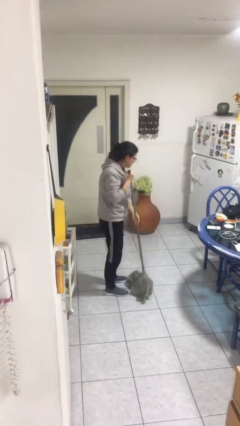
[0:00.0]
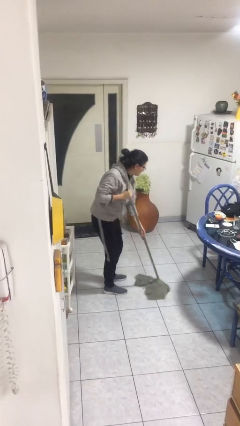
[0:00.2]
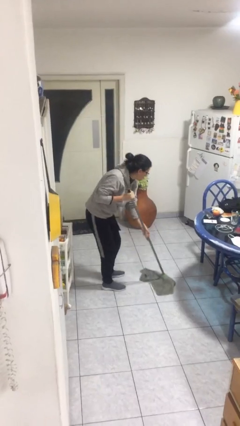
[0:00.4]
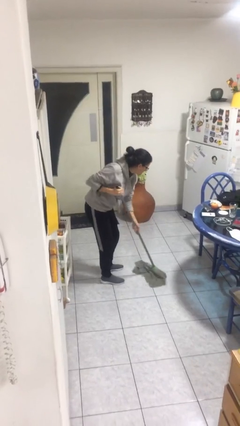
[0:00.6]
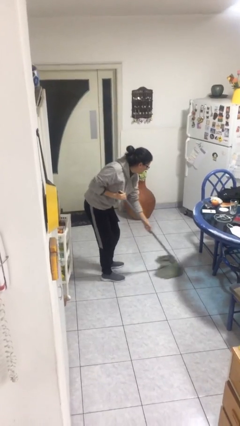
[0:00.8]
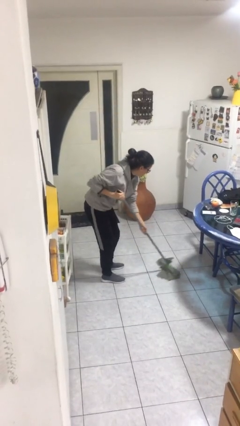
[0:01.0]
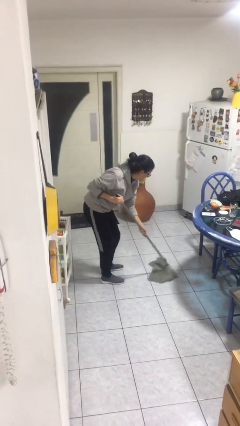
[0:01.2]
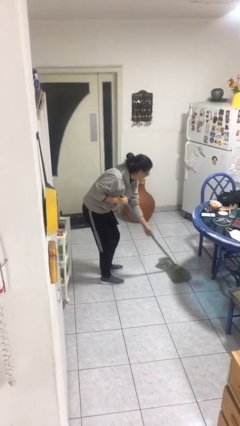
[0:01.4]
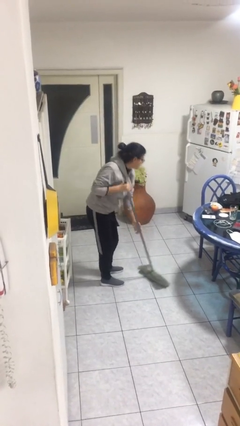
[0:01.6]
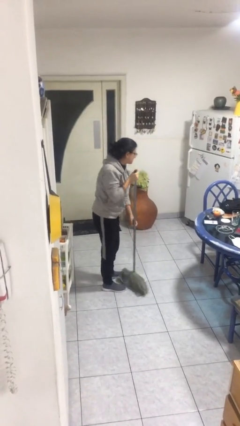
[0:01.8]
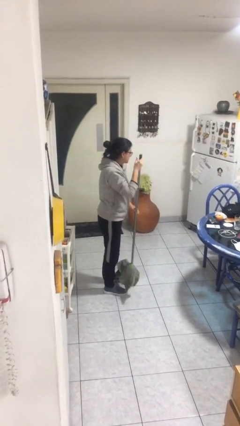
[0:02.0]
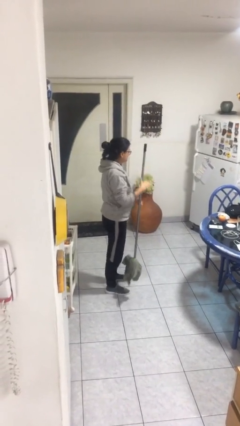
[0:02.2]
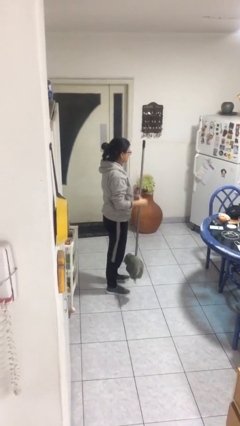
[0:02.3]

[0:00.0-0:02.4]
person sweeps floor

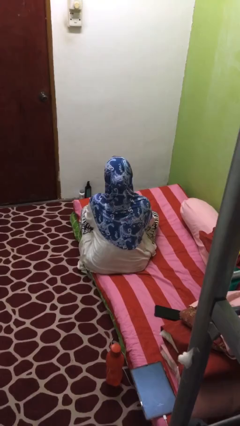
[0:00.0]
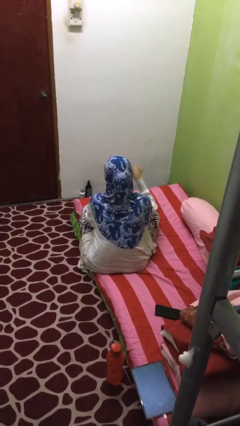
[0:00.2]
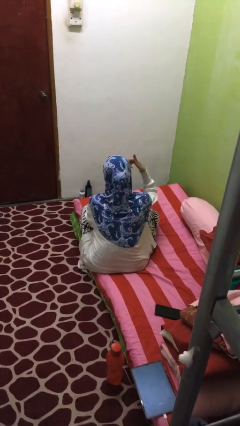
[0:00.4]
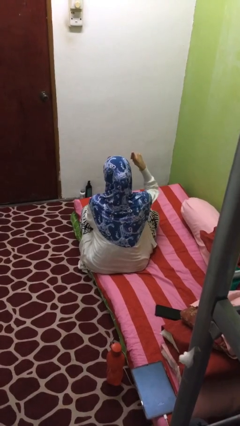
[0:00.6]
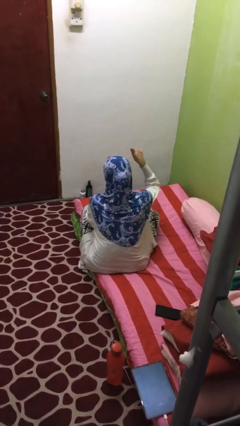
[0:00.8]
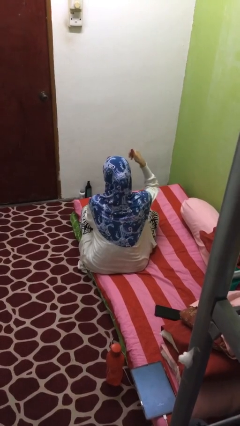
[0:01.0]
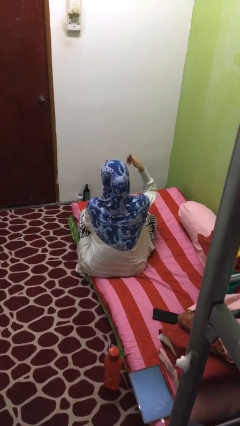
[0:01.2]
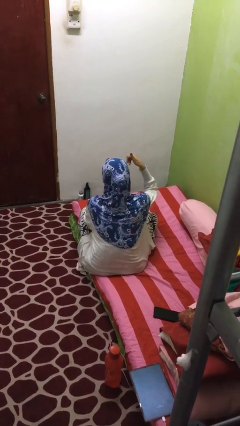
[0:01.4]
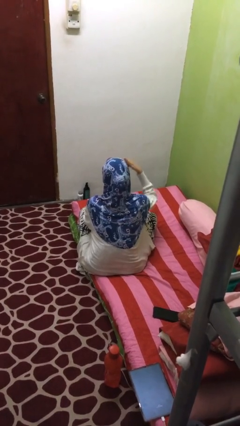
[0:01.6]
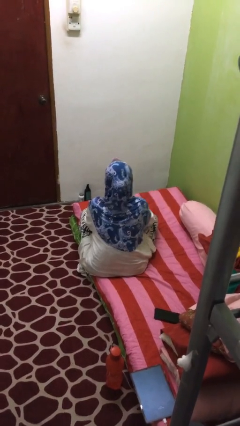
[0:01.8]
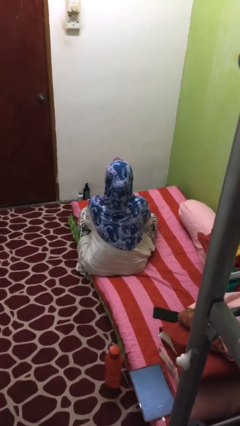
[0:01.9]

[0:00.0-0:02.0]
person gestures hang loose

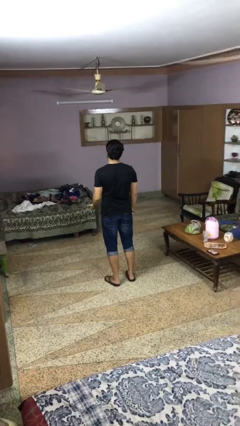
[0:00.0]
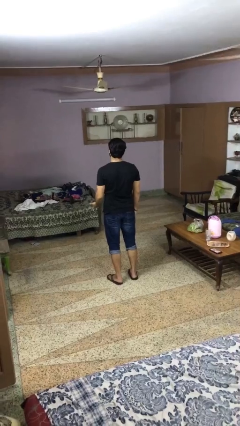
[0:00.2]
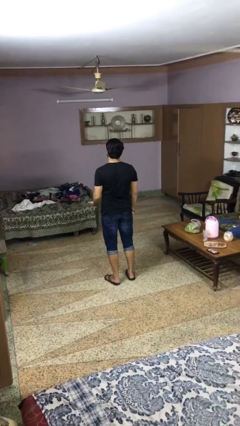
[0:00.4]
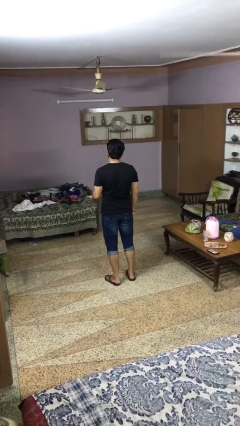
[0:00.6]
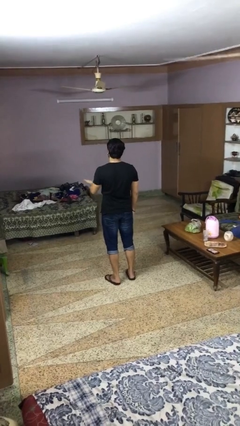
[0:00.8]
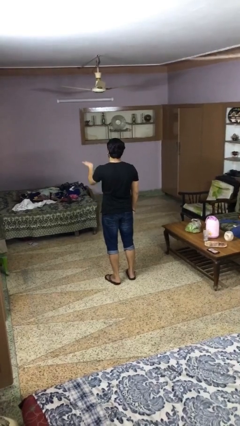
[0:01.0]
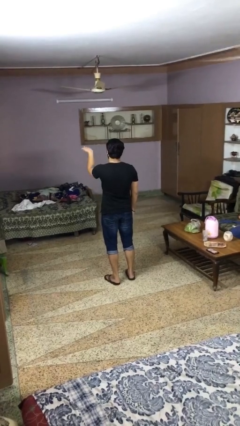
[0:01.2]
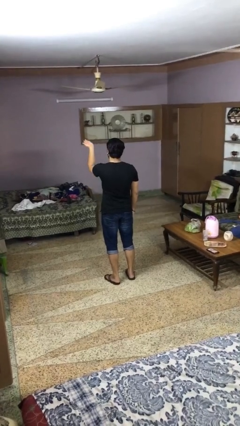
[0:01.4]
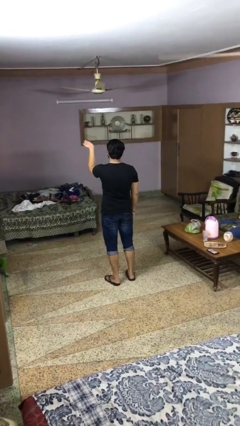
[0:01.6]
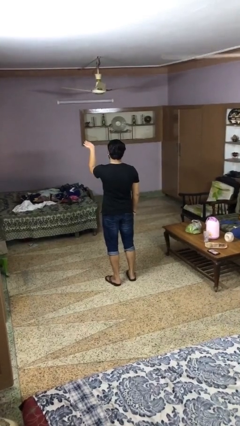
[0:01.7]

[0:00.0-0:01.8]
person gestures swipe up

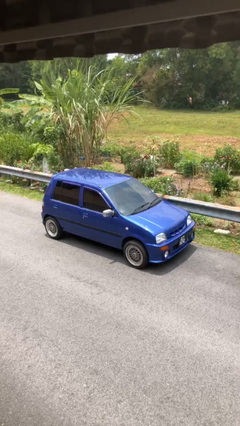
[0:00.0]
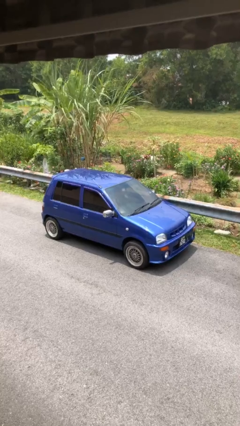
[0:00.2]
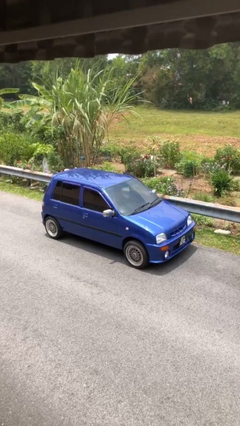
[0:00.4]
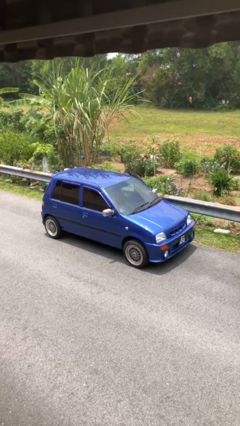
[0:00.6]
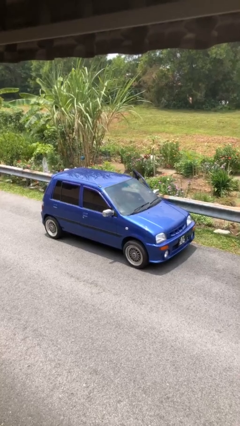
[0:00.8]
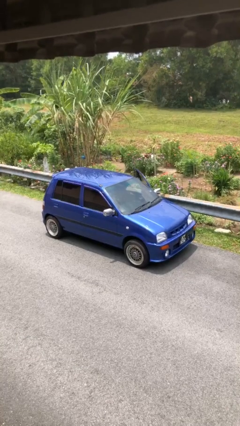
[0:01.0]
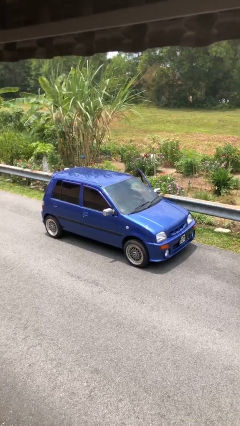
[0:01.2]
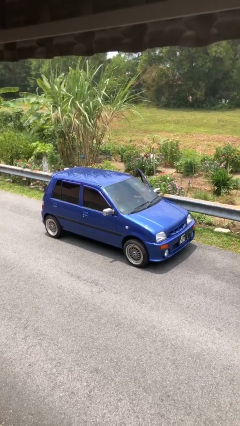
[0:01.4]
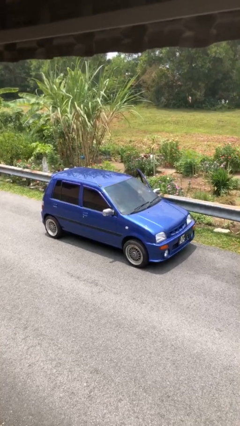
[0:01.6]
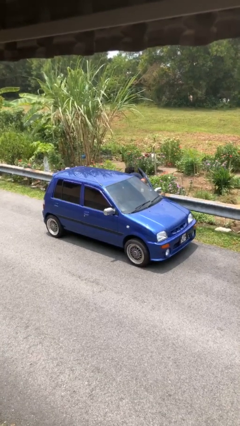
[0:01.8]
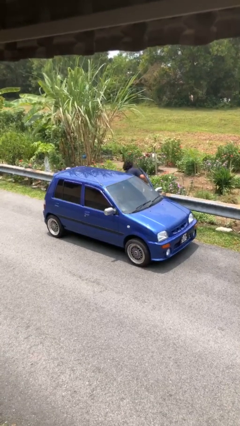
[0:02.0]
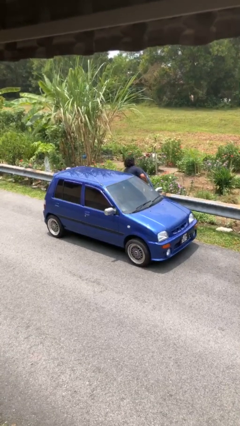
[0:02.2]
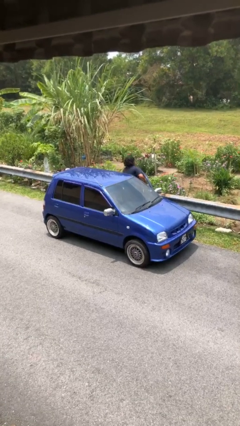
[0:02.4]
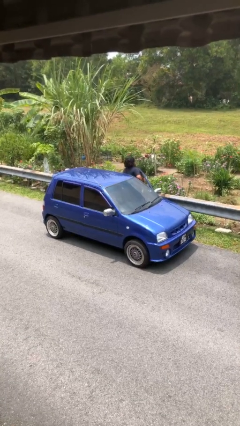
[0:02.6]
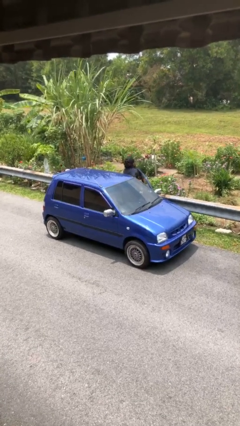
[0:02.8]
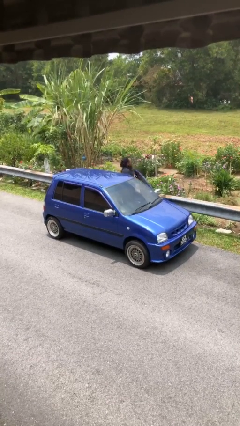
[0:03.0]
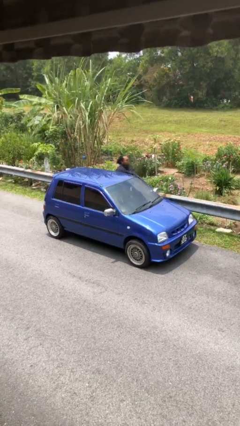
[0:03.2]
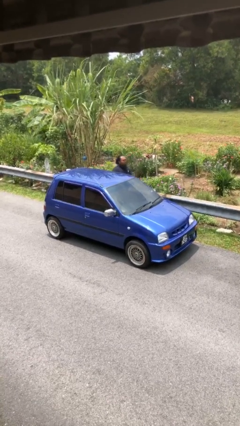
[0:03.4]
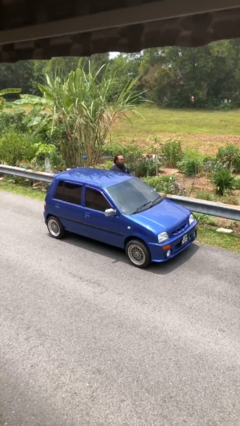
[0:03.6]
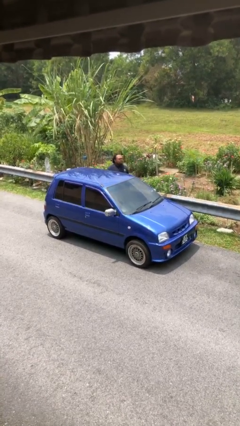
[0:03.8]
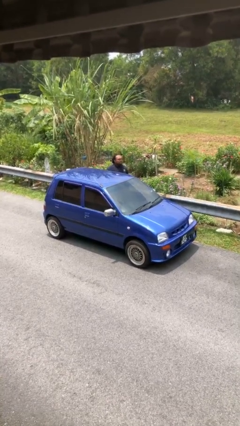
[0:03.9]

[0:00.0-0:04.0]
car drops off person

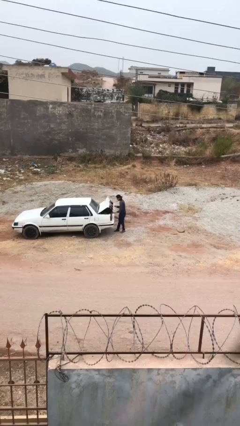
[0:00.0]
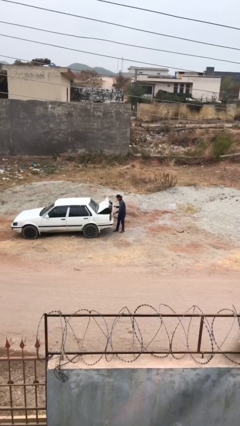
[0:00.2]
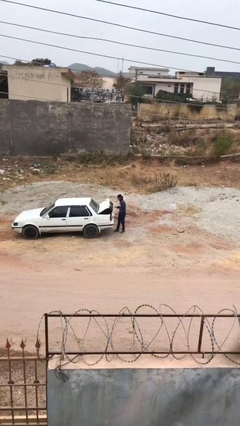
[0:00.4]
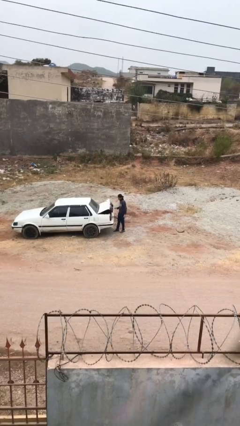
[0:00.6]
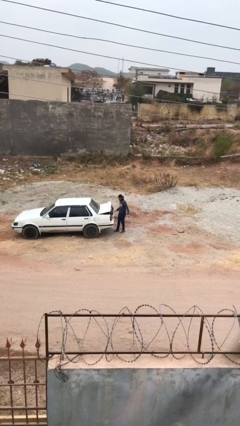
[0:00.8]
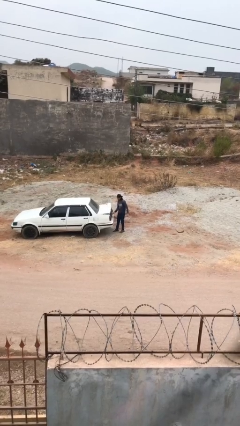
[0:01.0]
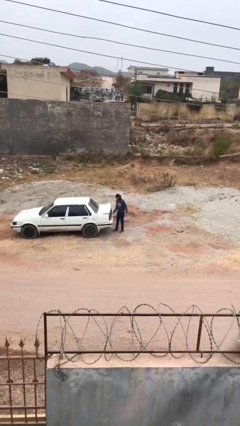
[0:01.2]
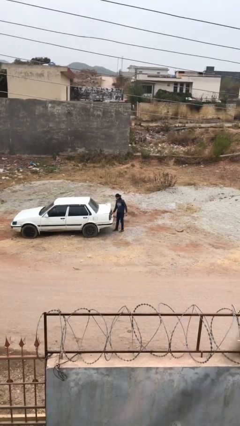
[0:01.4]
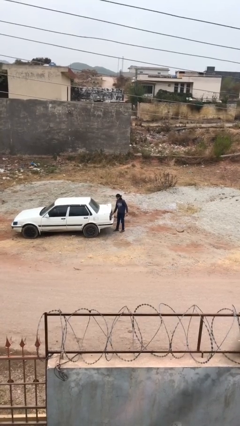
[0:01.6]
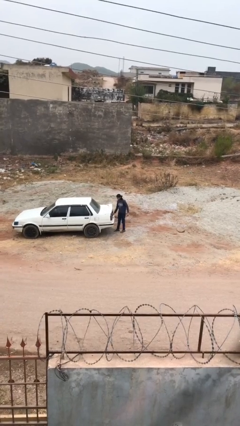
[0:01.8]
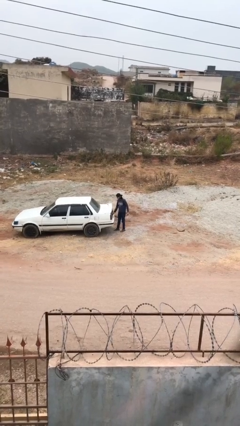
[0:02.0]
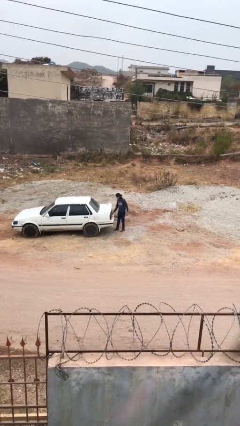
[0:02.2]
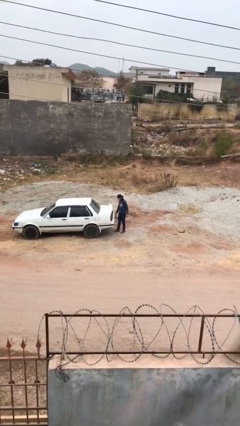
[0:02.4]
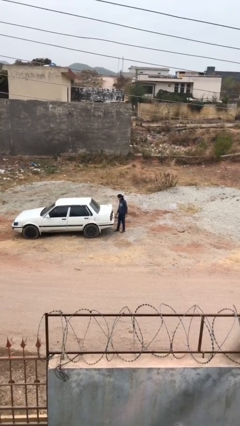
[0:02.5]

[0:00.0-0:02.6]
person closes car trunk

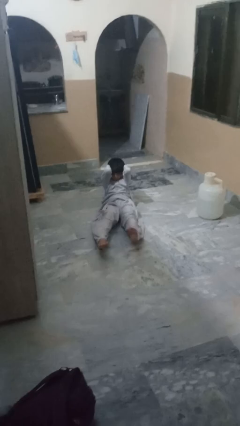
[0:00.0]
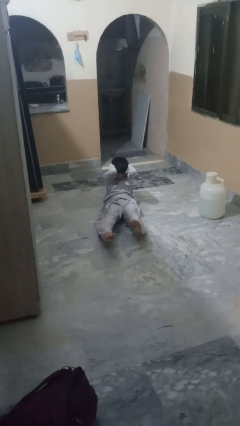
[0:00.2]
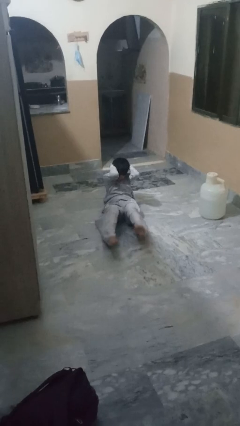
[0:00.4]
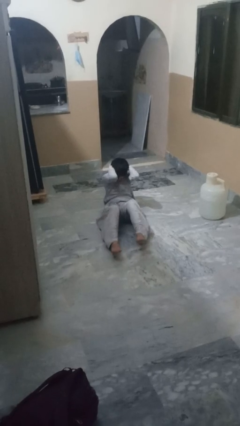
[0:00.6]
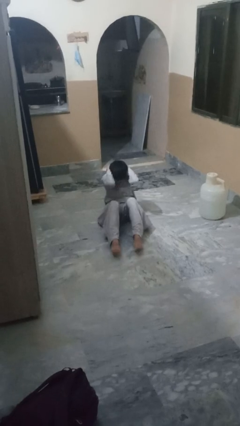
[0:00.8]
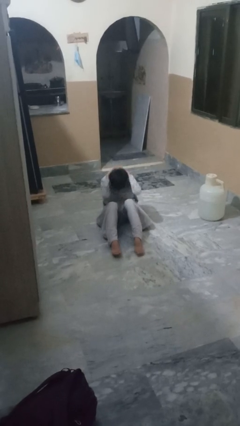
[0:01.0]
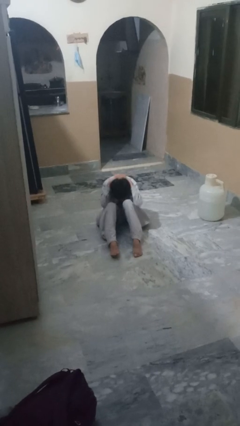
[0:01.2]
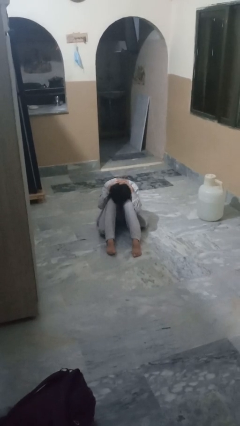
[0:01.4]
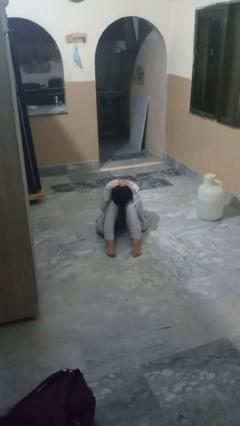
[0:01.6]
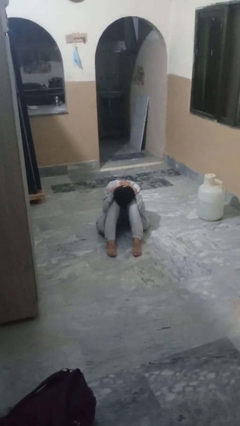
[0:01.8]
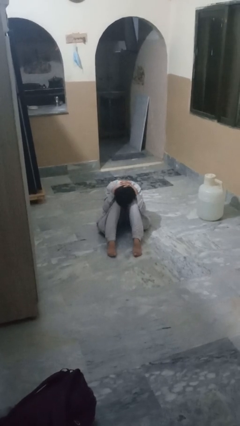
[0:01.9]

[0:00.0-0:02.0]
person exercises with situp

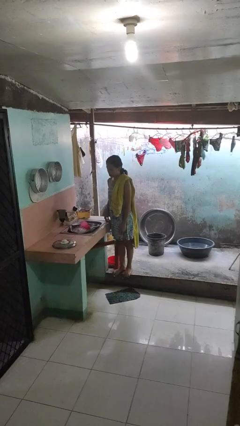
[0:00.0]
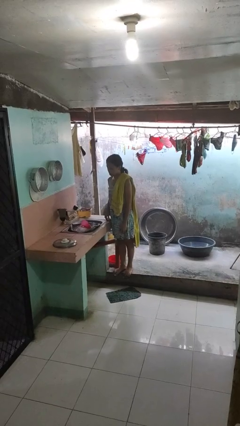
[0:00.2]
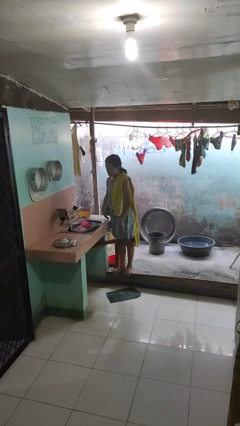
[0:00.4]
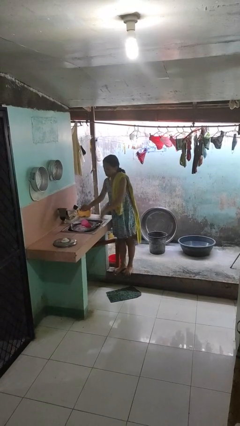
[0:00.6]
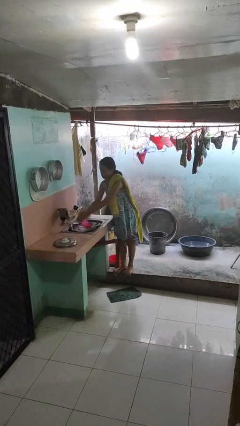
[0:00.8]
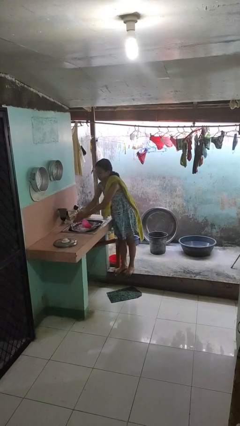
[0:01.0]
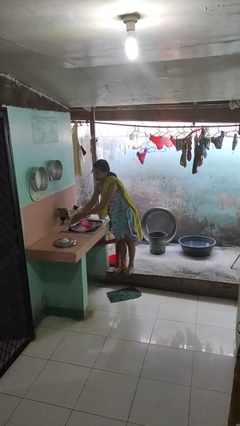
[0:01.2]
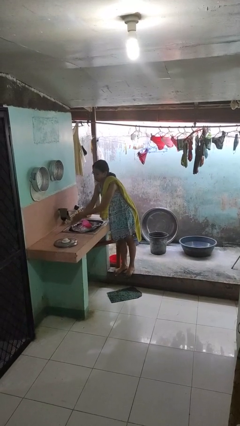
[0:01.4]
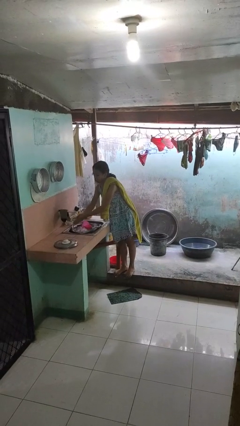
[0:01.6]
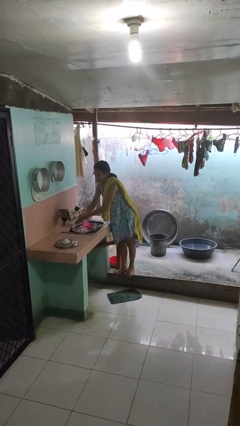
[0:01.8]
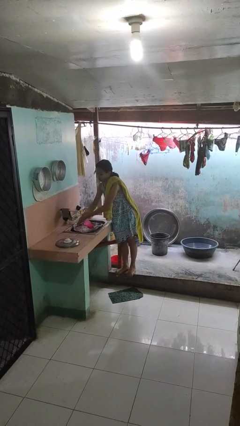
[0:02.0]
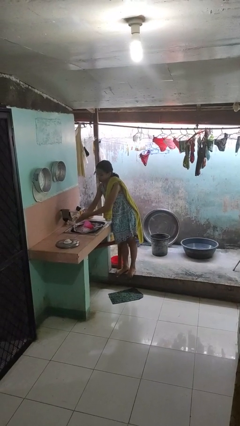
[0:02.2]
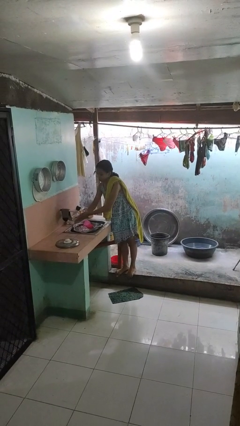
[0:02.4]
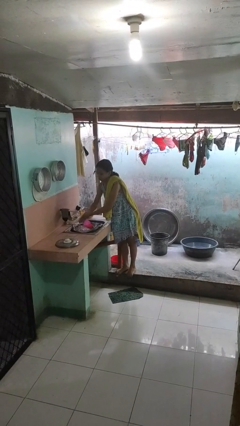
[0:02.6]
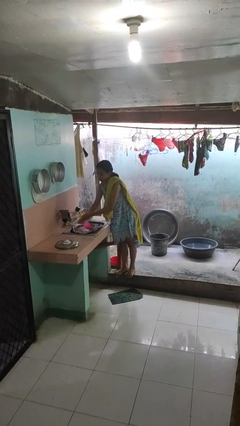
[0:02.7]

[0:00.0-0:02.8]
person washes hands
